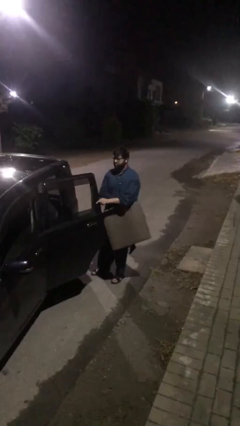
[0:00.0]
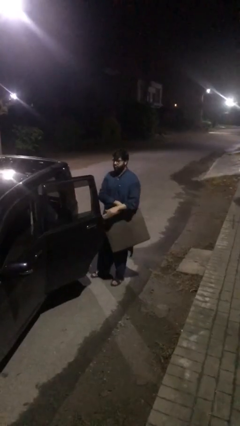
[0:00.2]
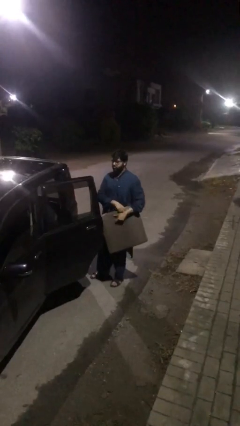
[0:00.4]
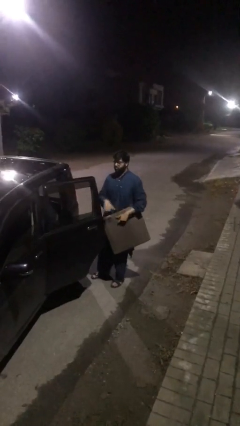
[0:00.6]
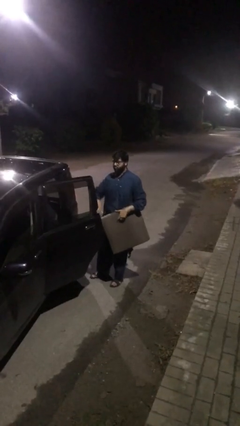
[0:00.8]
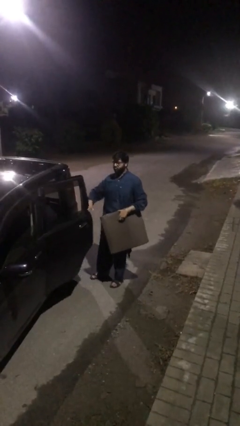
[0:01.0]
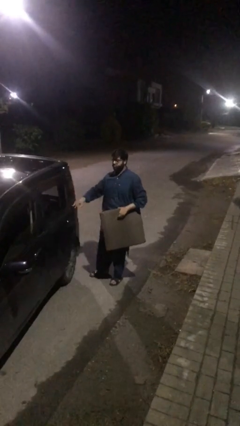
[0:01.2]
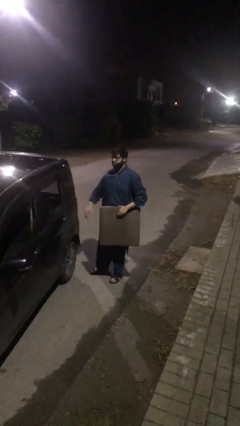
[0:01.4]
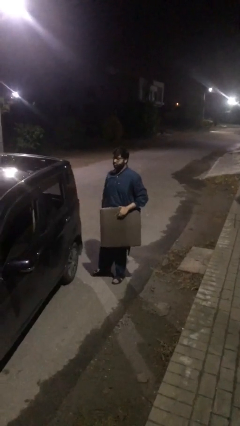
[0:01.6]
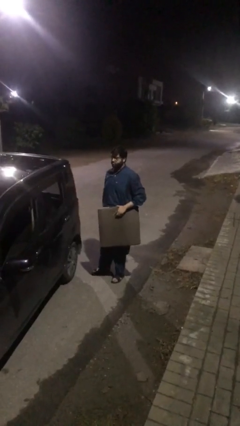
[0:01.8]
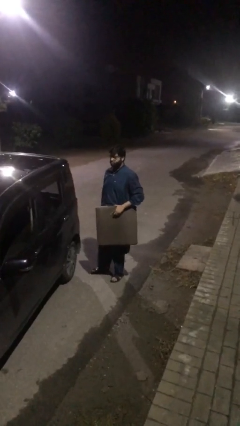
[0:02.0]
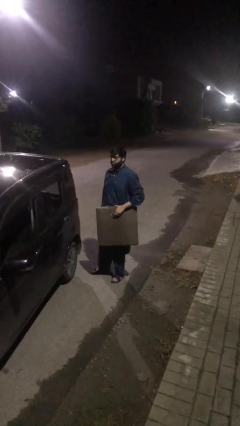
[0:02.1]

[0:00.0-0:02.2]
person closes car door

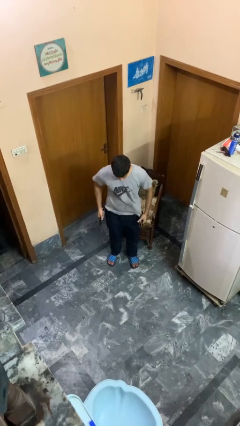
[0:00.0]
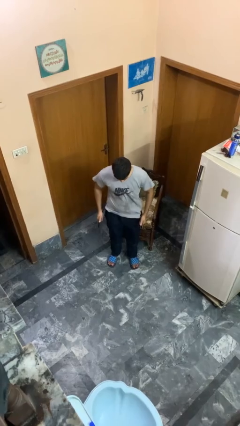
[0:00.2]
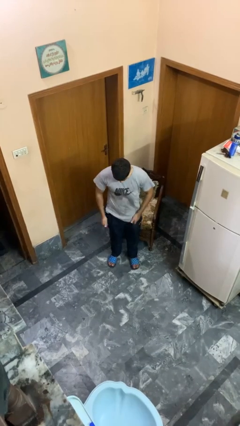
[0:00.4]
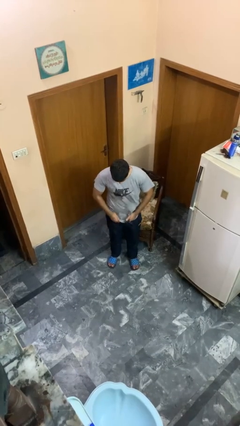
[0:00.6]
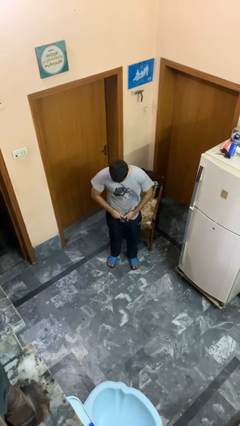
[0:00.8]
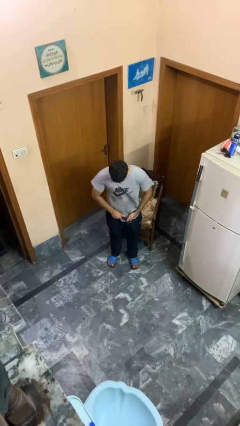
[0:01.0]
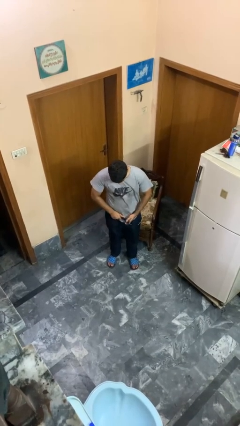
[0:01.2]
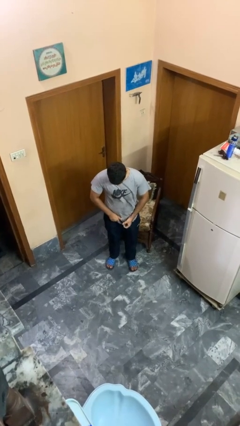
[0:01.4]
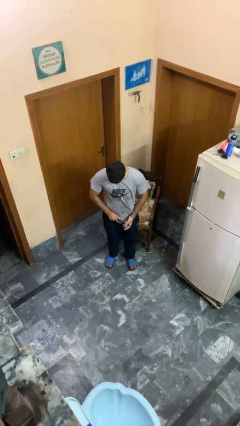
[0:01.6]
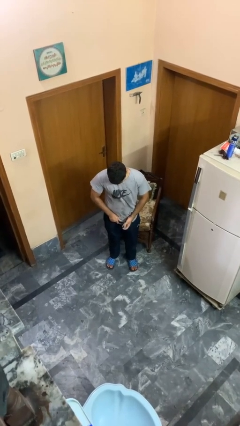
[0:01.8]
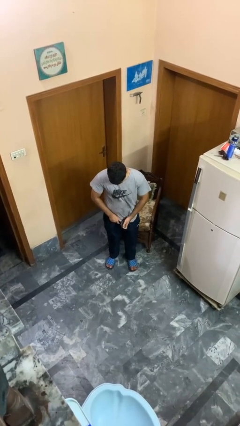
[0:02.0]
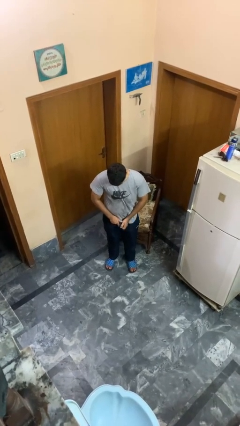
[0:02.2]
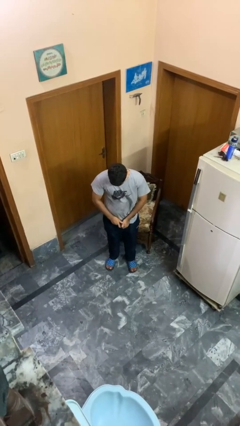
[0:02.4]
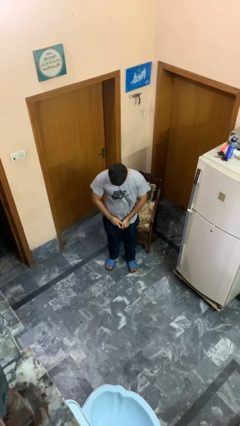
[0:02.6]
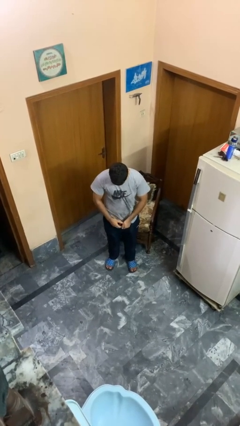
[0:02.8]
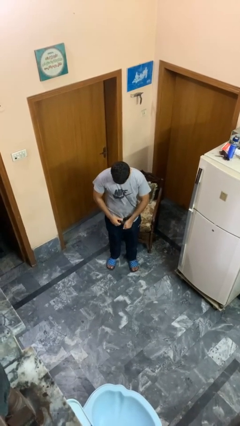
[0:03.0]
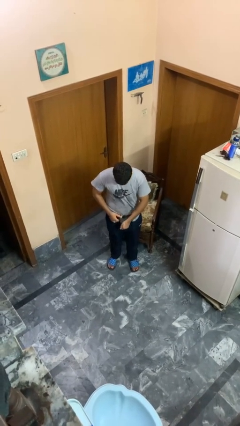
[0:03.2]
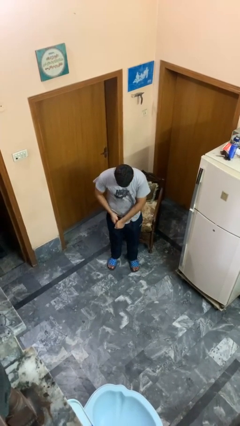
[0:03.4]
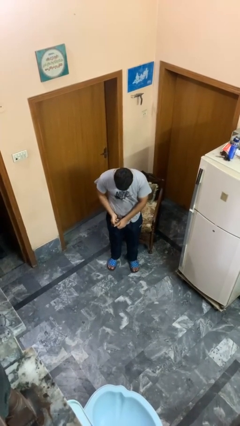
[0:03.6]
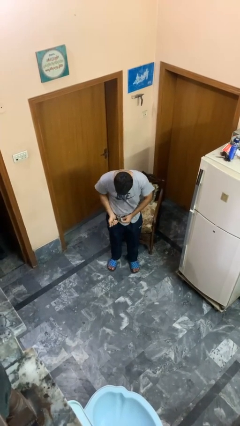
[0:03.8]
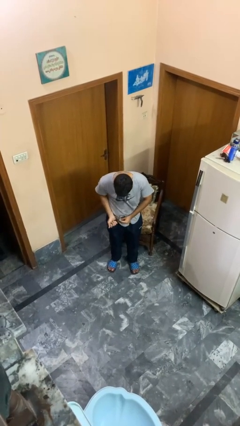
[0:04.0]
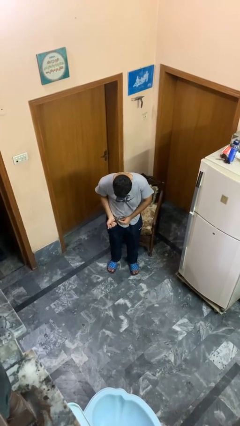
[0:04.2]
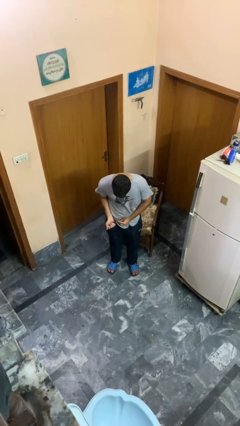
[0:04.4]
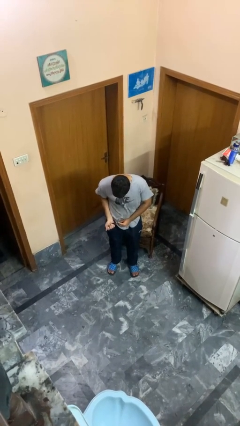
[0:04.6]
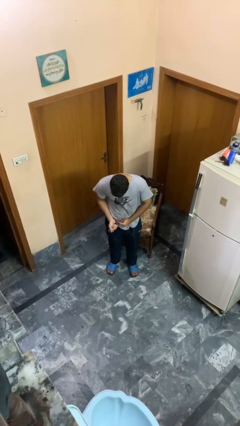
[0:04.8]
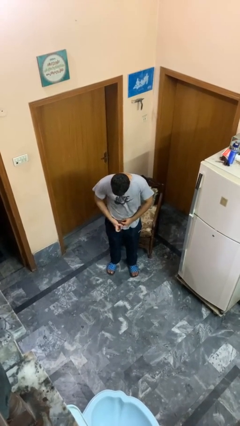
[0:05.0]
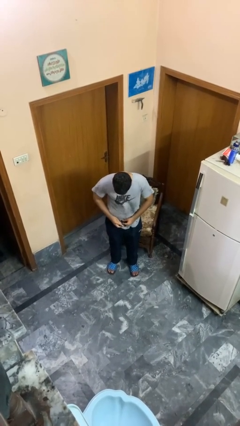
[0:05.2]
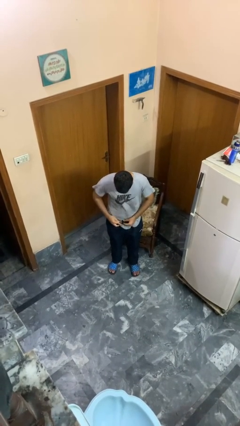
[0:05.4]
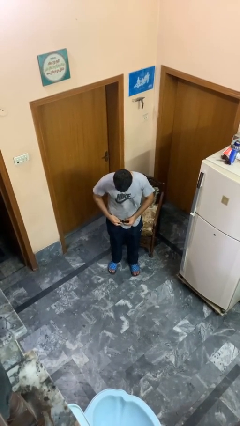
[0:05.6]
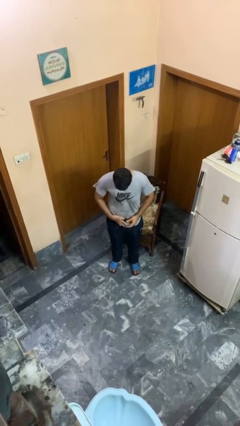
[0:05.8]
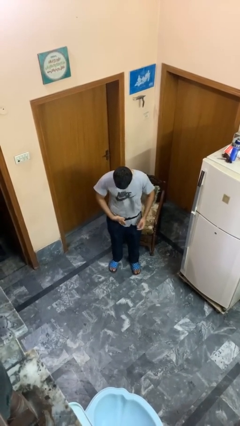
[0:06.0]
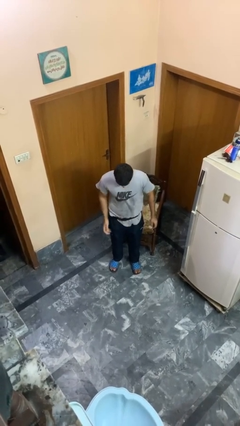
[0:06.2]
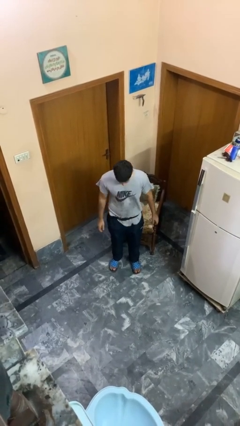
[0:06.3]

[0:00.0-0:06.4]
person puts on belt

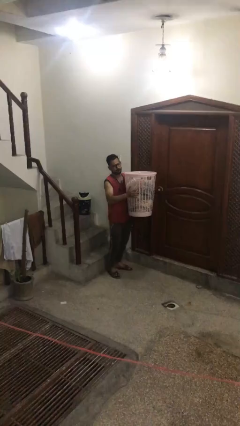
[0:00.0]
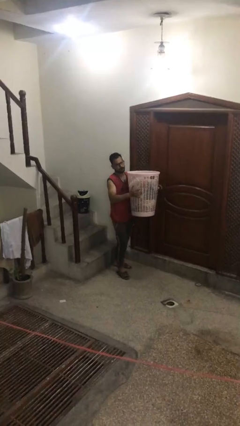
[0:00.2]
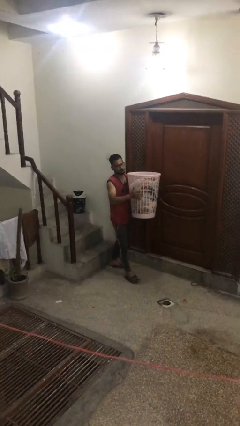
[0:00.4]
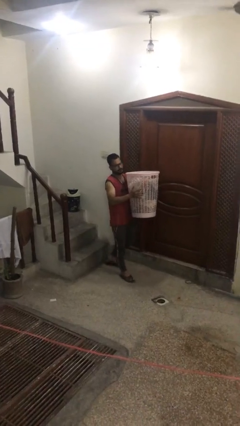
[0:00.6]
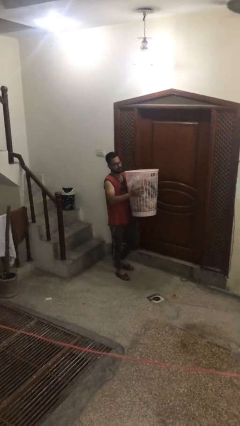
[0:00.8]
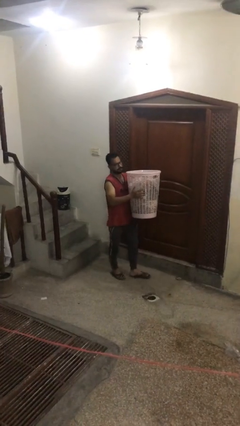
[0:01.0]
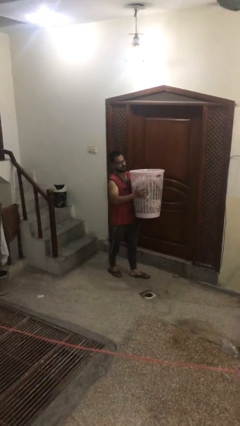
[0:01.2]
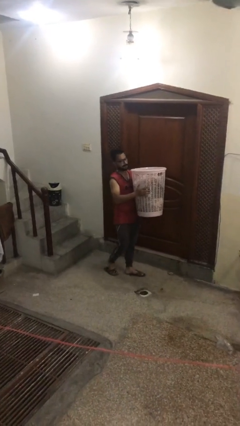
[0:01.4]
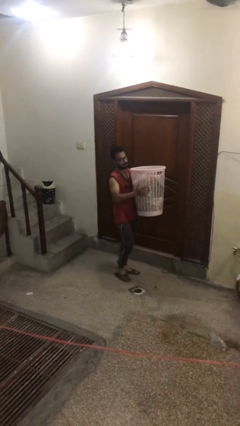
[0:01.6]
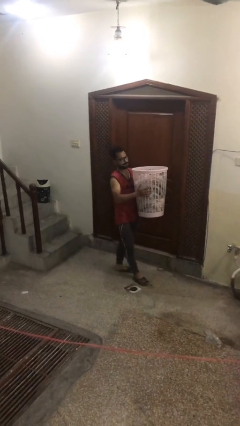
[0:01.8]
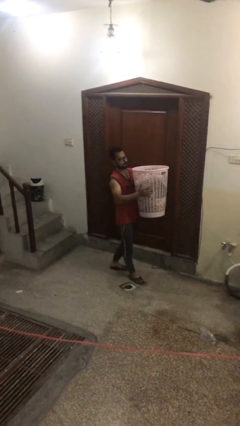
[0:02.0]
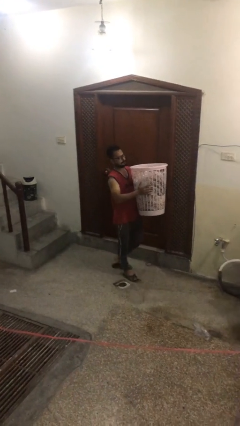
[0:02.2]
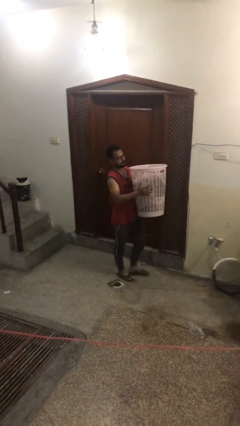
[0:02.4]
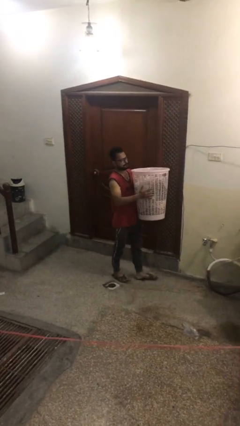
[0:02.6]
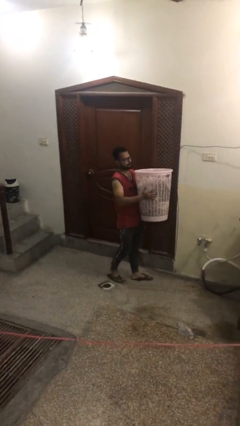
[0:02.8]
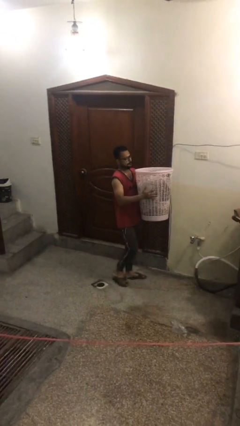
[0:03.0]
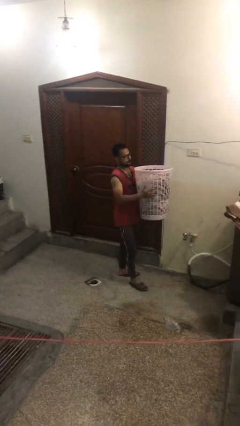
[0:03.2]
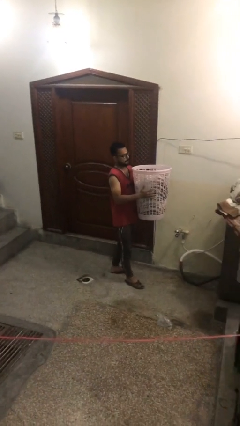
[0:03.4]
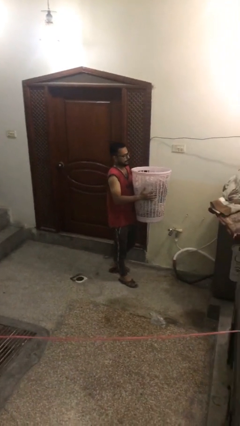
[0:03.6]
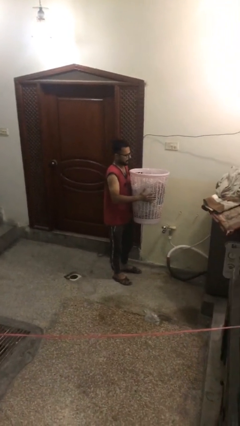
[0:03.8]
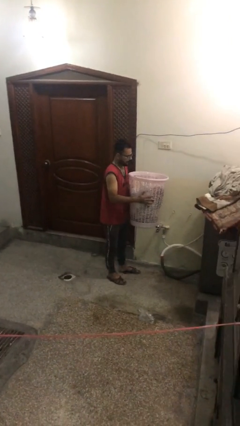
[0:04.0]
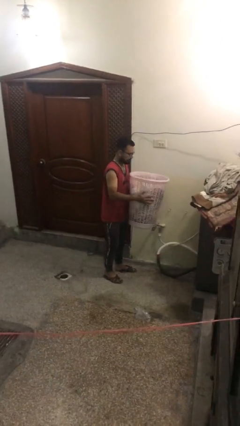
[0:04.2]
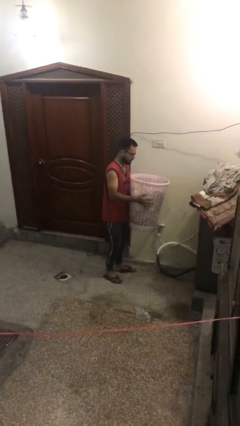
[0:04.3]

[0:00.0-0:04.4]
person carries heavy object

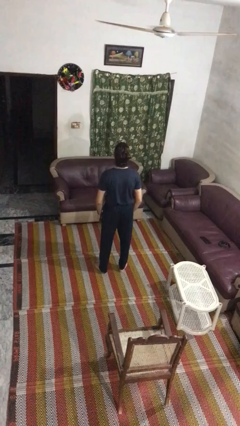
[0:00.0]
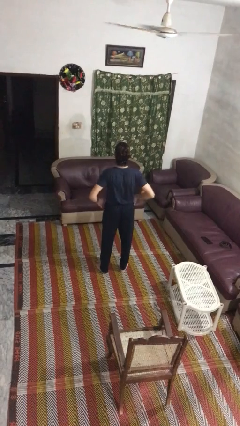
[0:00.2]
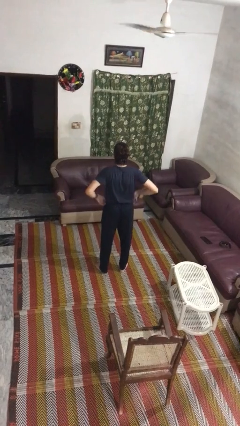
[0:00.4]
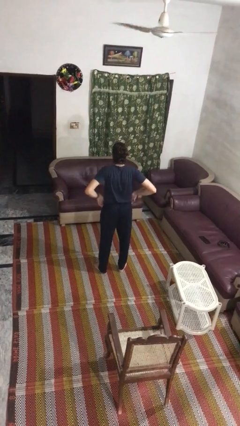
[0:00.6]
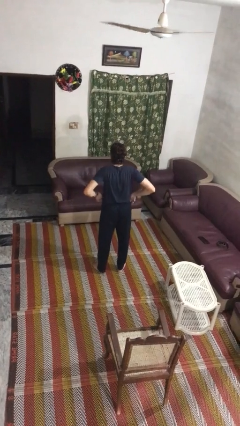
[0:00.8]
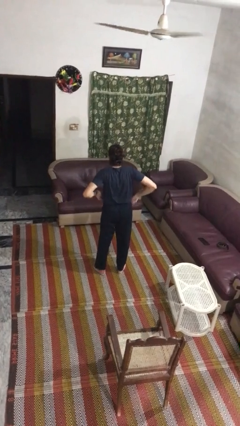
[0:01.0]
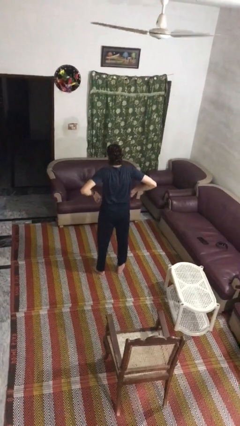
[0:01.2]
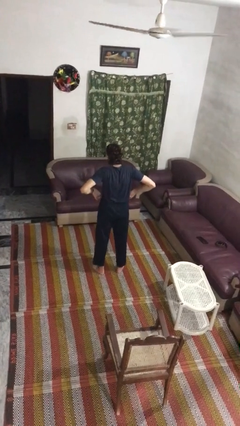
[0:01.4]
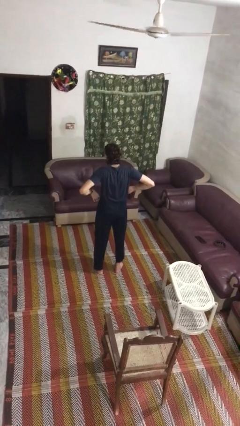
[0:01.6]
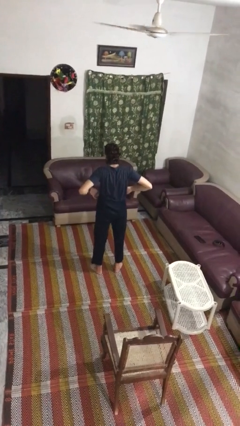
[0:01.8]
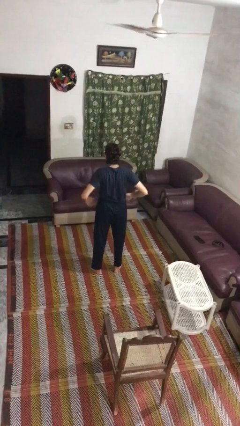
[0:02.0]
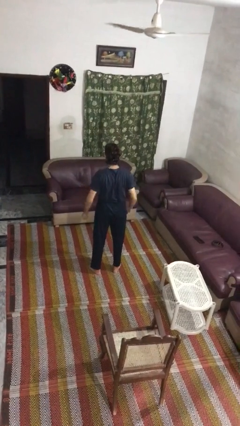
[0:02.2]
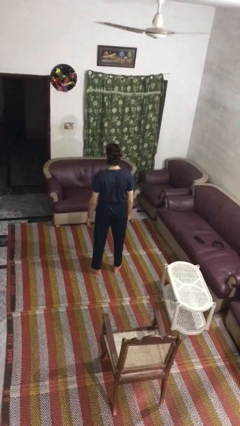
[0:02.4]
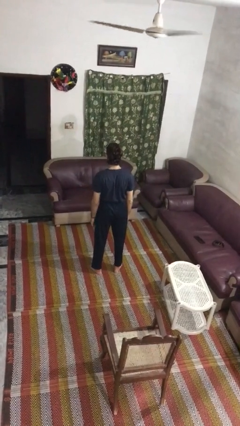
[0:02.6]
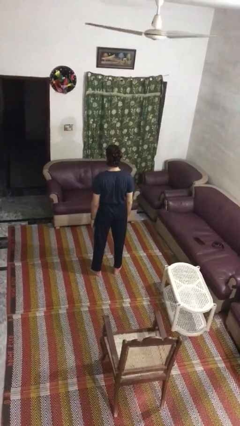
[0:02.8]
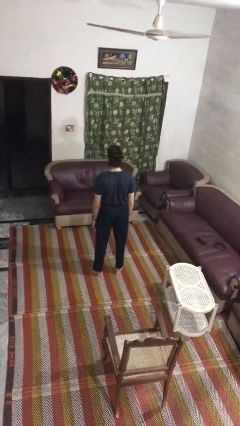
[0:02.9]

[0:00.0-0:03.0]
person hikes up pants

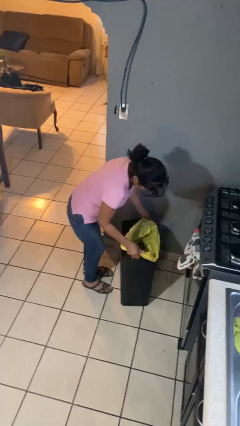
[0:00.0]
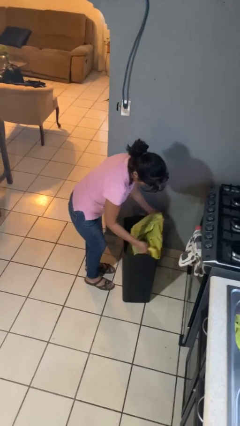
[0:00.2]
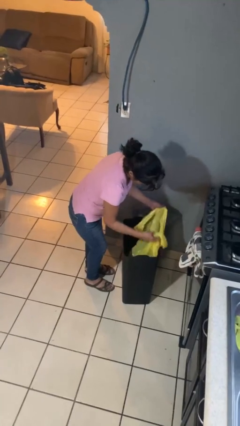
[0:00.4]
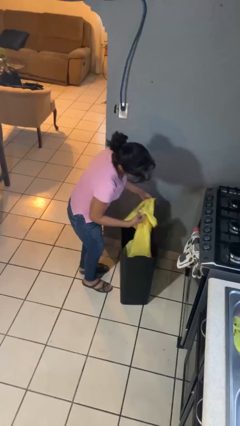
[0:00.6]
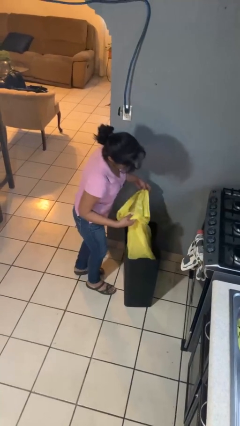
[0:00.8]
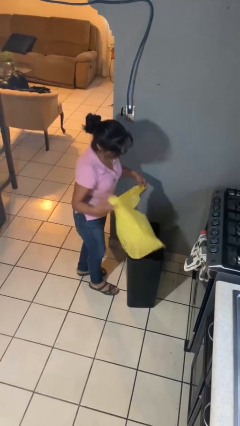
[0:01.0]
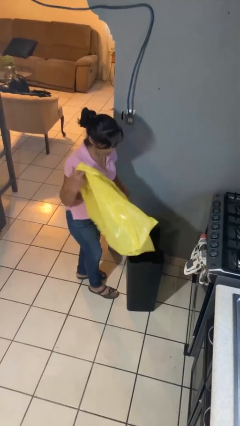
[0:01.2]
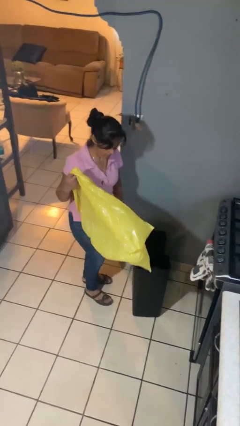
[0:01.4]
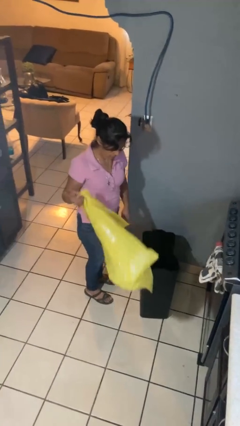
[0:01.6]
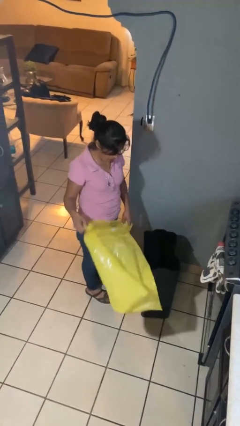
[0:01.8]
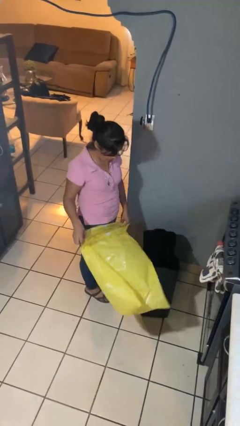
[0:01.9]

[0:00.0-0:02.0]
person removes trashbag from trashcan
